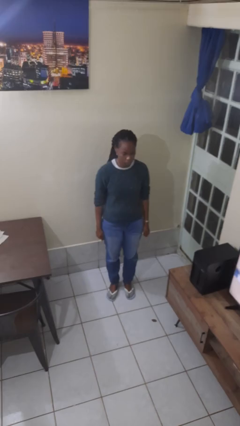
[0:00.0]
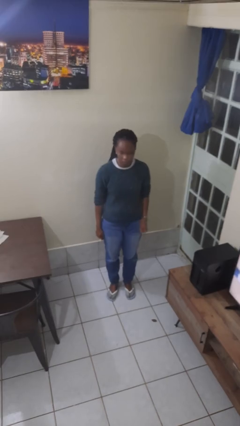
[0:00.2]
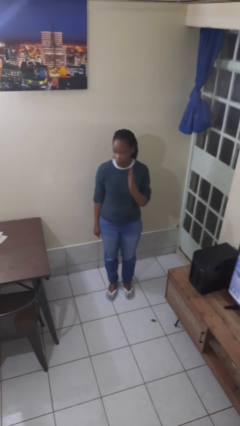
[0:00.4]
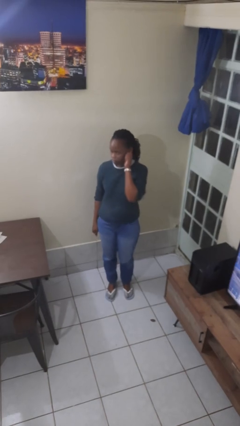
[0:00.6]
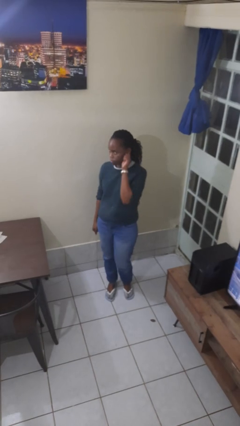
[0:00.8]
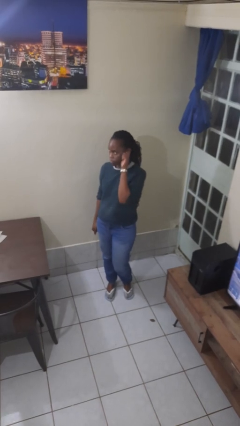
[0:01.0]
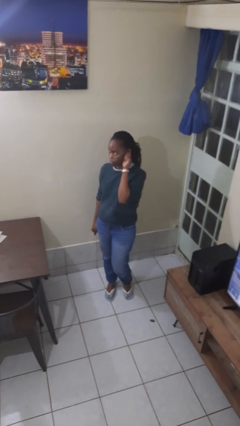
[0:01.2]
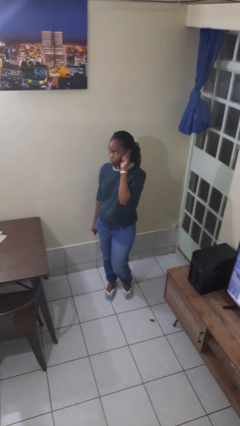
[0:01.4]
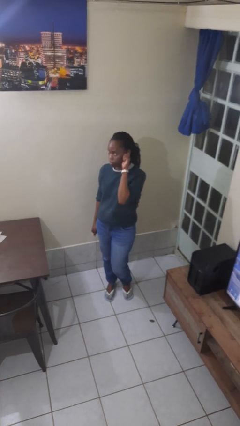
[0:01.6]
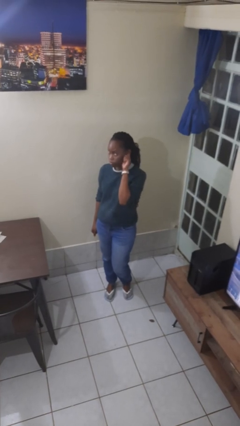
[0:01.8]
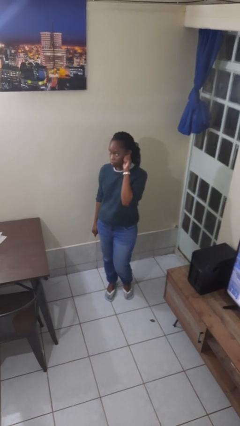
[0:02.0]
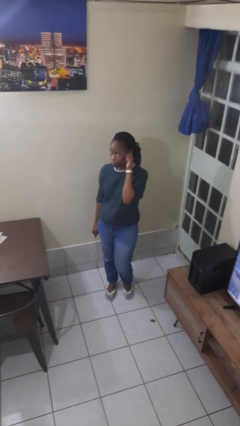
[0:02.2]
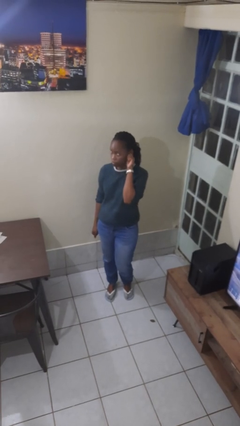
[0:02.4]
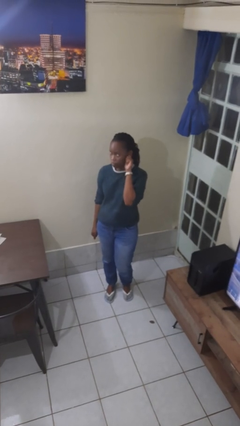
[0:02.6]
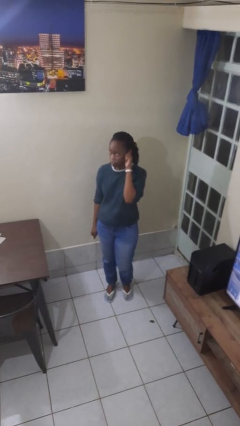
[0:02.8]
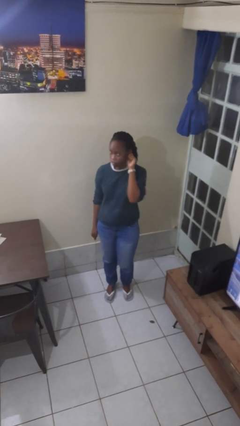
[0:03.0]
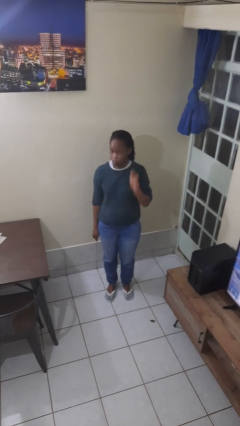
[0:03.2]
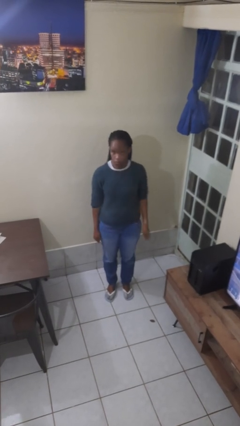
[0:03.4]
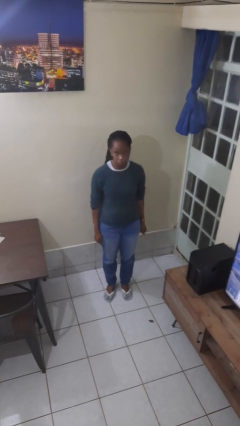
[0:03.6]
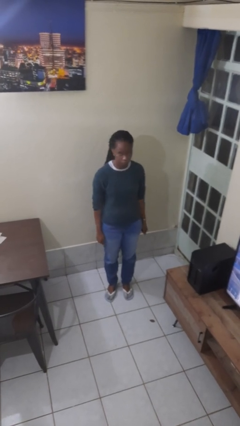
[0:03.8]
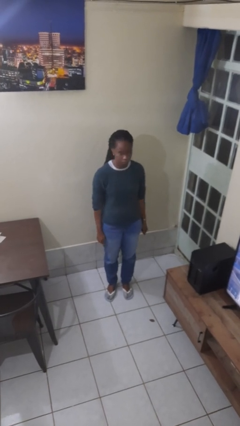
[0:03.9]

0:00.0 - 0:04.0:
person touches earlobe

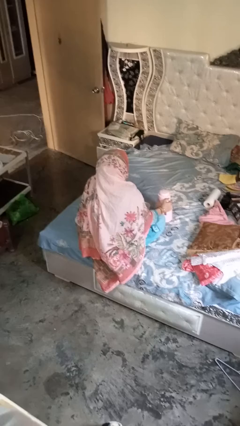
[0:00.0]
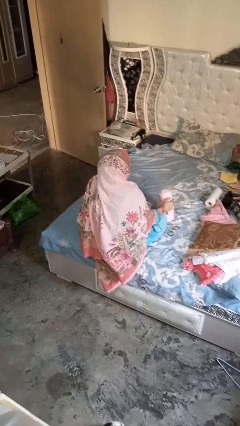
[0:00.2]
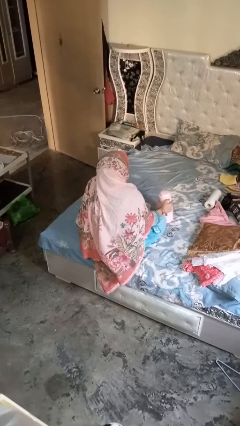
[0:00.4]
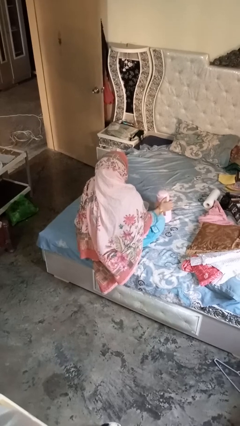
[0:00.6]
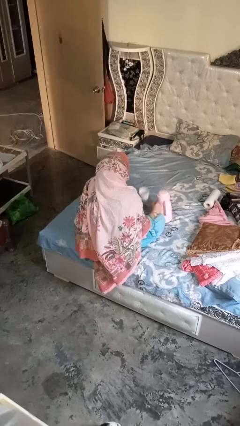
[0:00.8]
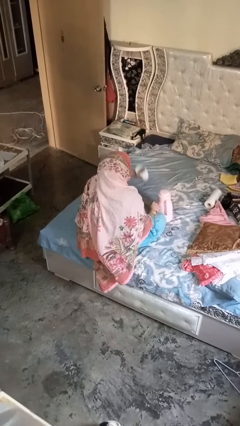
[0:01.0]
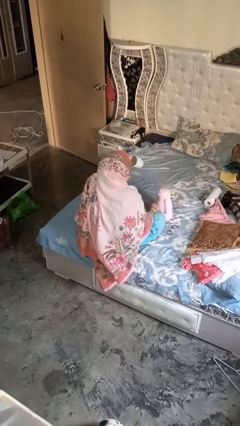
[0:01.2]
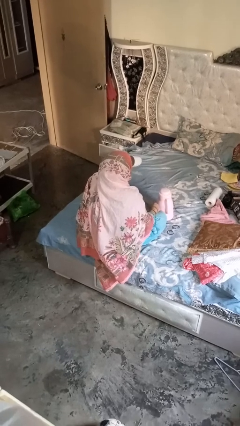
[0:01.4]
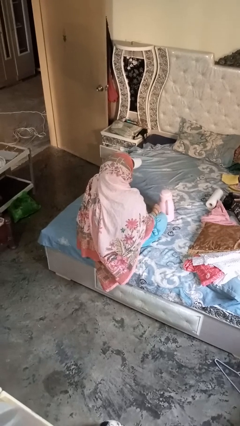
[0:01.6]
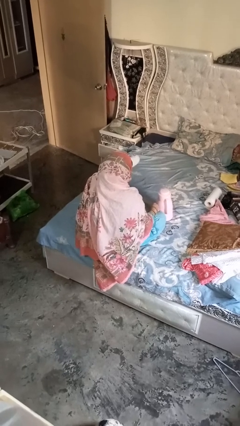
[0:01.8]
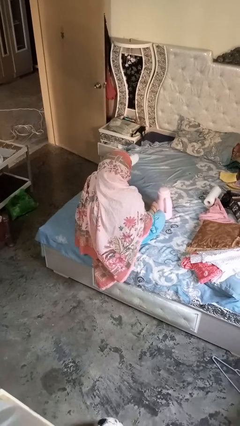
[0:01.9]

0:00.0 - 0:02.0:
person pours coffee into mug

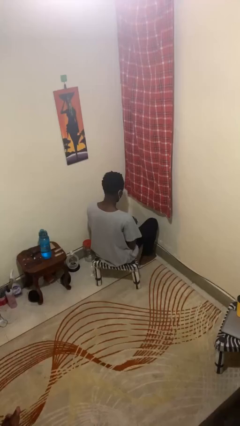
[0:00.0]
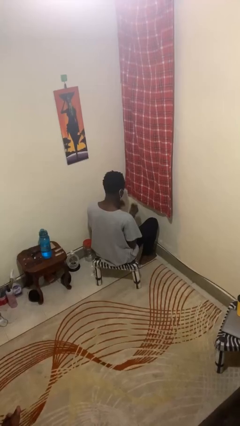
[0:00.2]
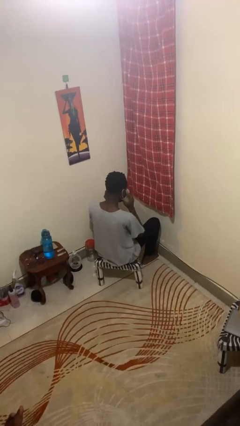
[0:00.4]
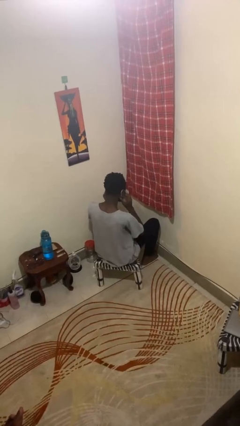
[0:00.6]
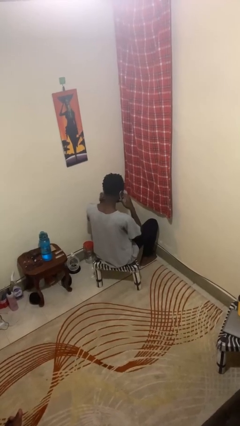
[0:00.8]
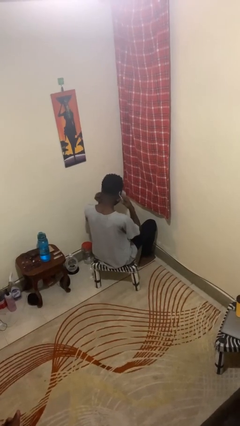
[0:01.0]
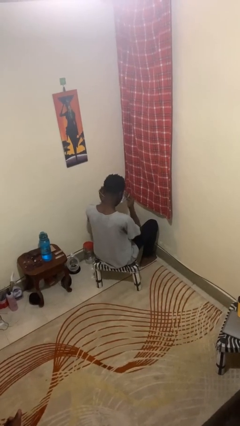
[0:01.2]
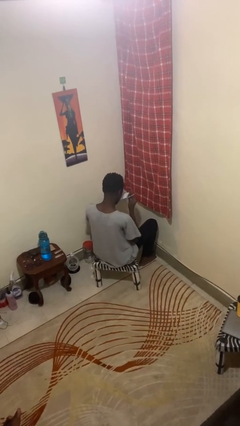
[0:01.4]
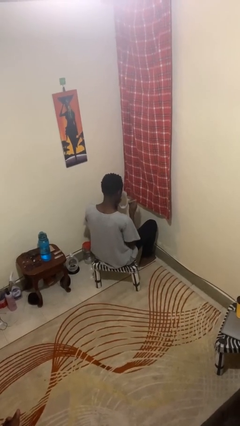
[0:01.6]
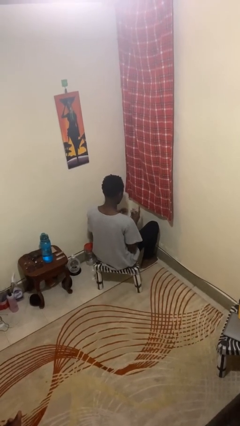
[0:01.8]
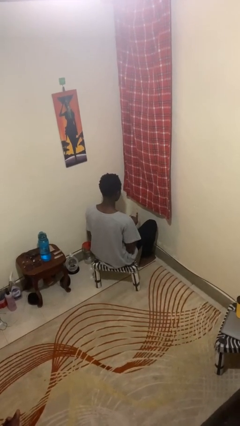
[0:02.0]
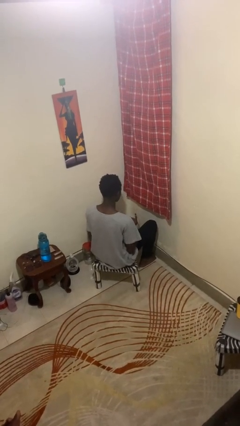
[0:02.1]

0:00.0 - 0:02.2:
person takes off facemask

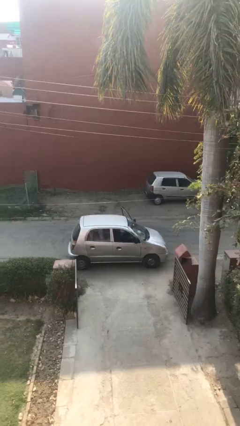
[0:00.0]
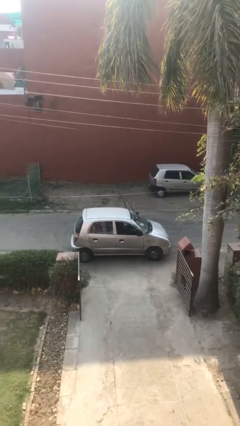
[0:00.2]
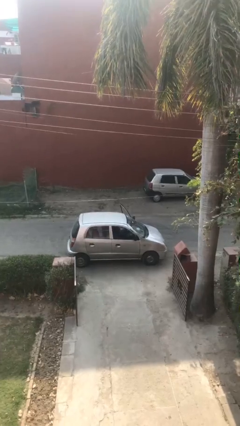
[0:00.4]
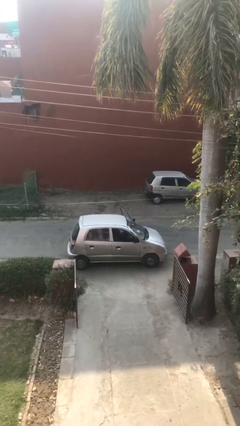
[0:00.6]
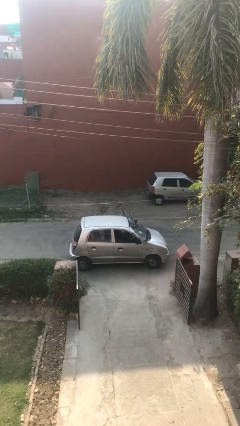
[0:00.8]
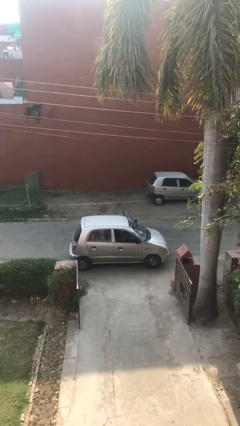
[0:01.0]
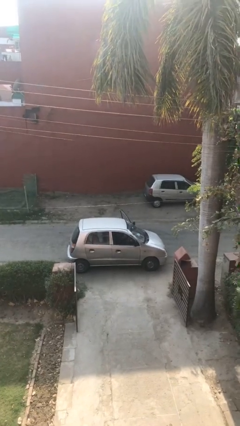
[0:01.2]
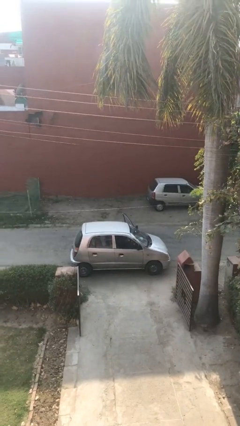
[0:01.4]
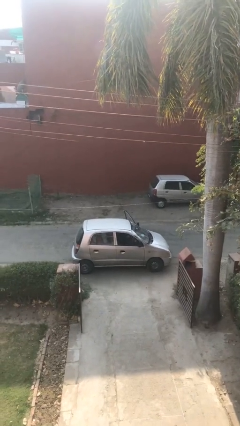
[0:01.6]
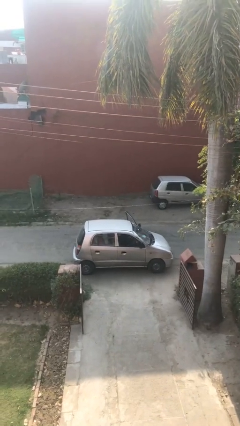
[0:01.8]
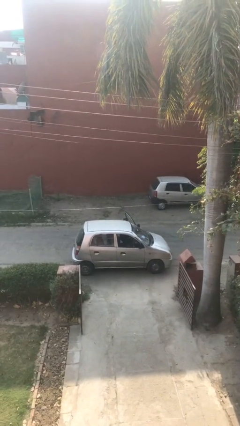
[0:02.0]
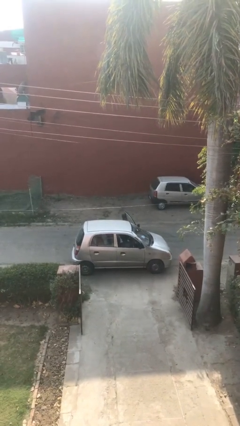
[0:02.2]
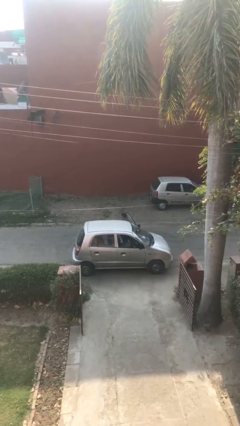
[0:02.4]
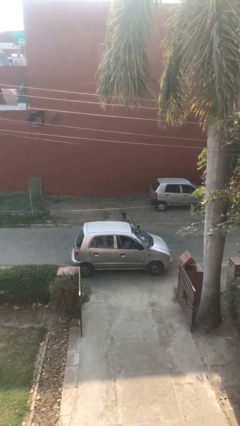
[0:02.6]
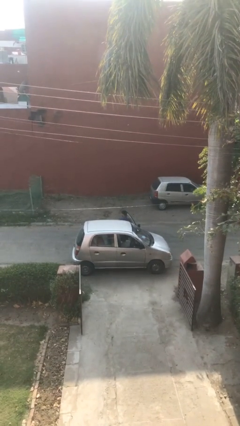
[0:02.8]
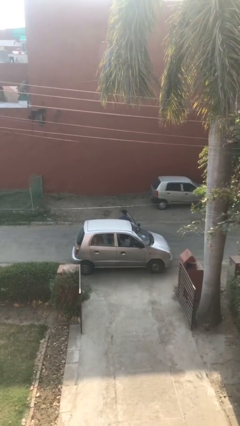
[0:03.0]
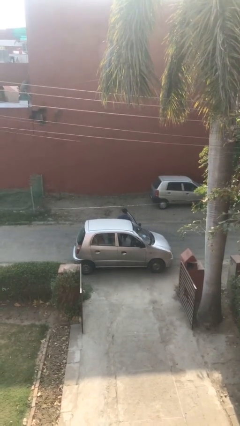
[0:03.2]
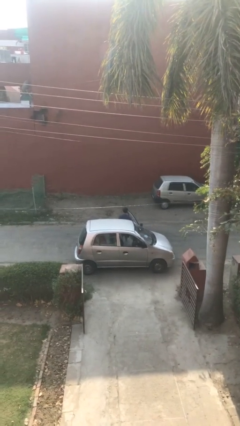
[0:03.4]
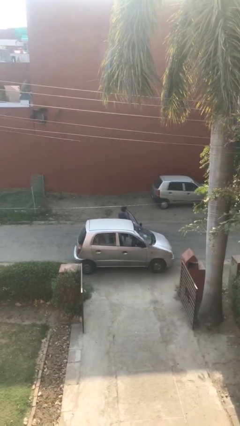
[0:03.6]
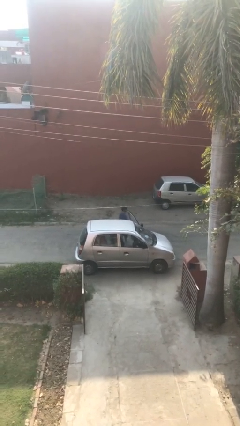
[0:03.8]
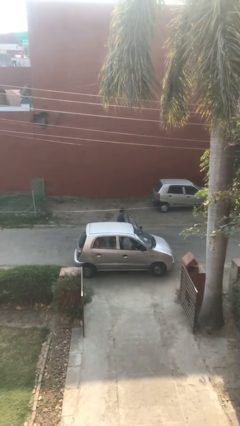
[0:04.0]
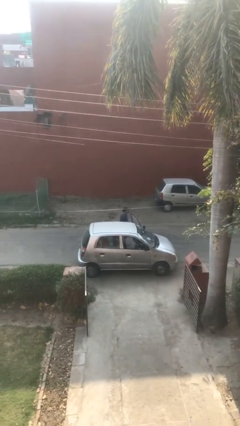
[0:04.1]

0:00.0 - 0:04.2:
person exits car

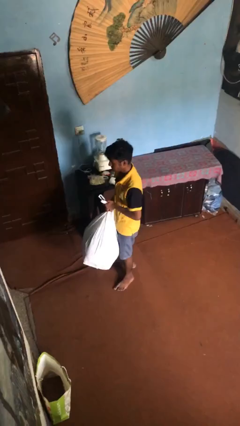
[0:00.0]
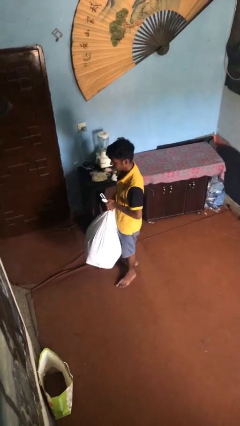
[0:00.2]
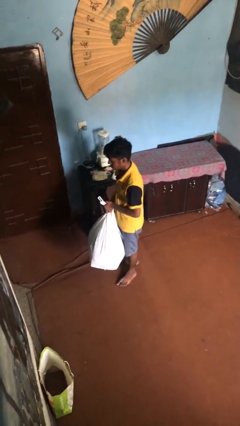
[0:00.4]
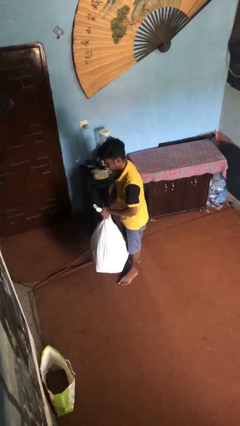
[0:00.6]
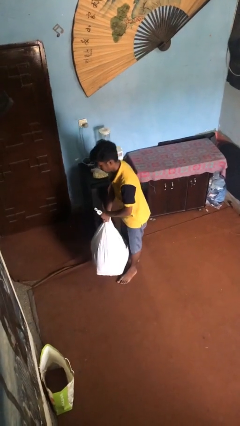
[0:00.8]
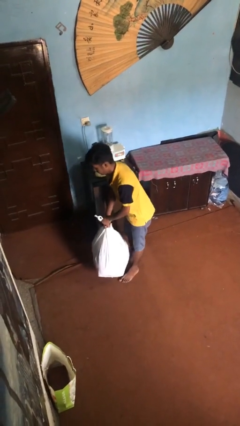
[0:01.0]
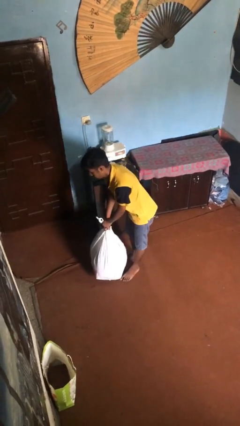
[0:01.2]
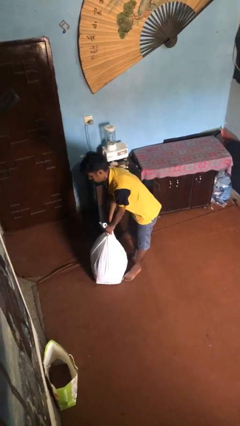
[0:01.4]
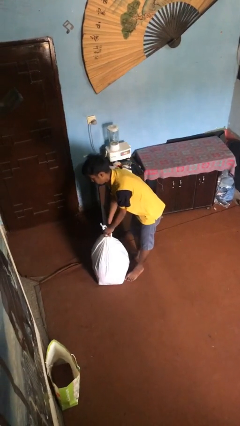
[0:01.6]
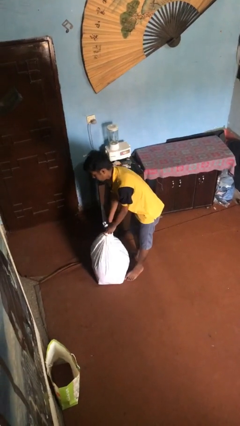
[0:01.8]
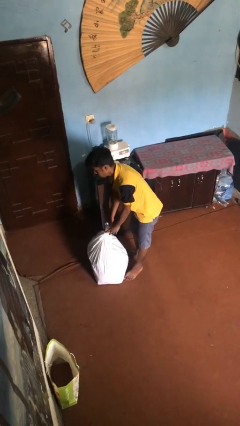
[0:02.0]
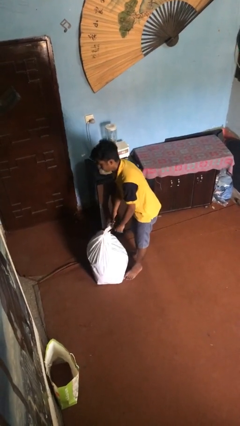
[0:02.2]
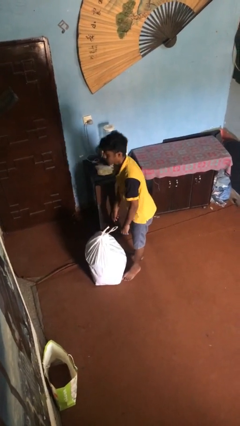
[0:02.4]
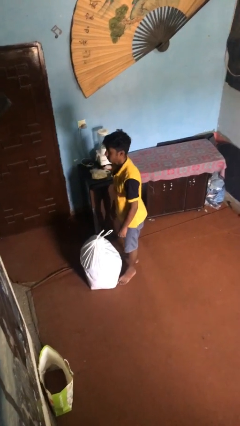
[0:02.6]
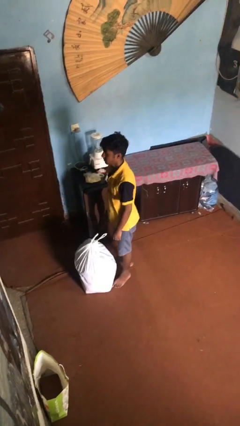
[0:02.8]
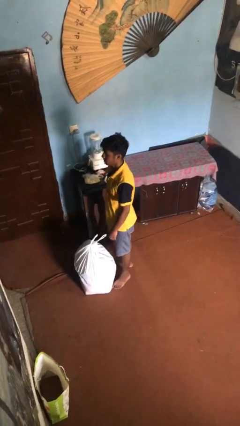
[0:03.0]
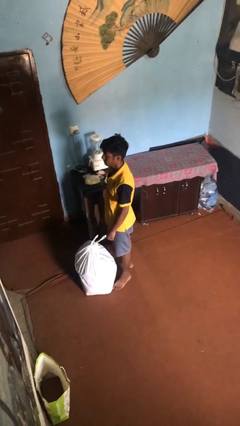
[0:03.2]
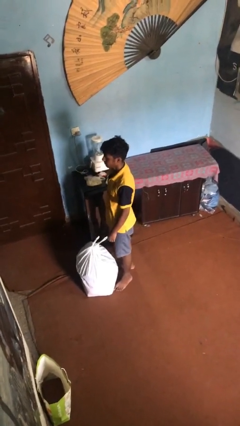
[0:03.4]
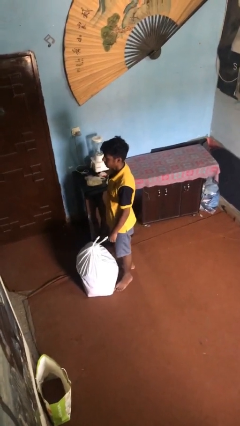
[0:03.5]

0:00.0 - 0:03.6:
person puts down object on floor

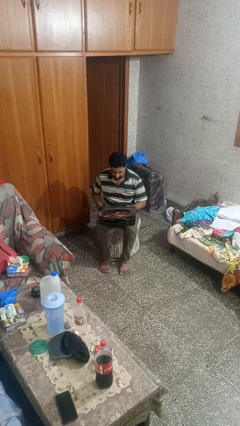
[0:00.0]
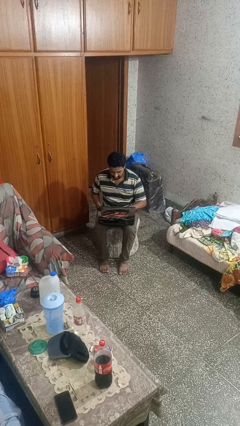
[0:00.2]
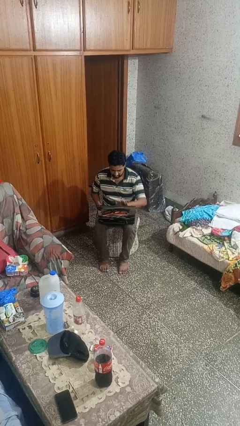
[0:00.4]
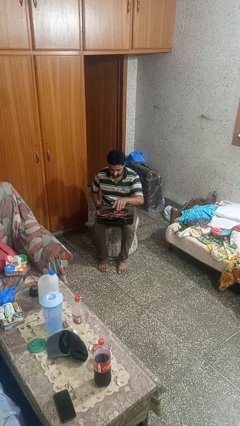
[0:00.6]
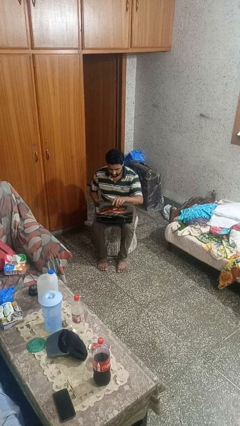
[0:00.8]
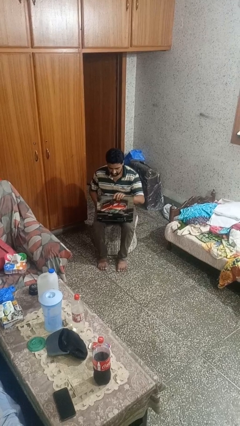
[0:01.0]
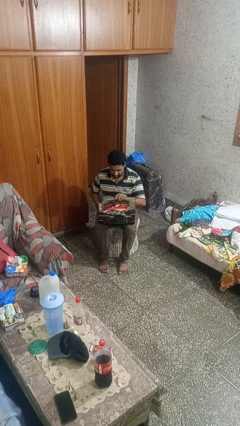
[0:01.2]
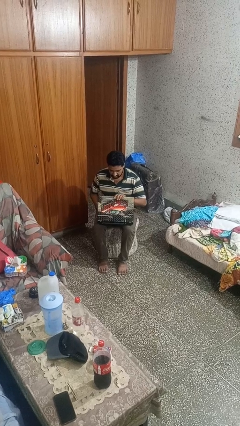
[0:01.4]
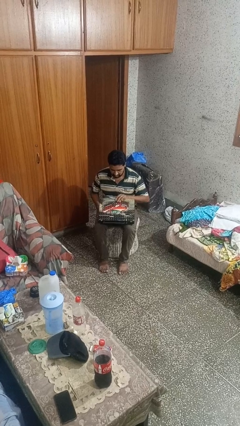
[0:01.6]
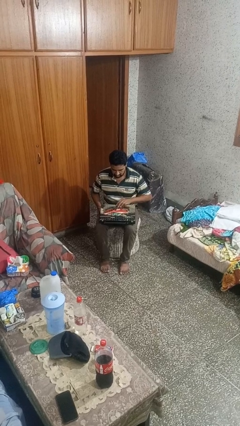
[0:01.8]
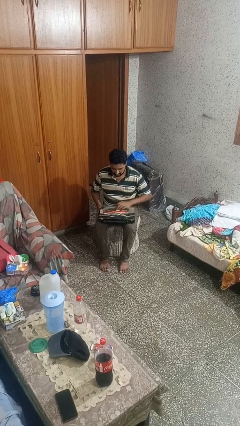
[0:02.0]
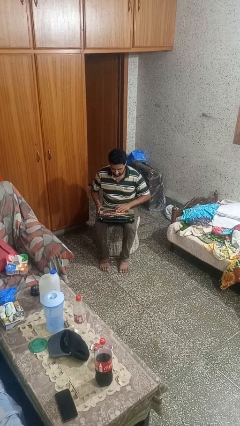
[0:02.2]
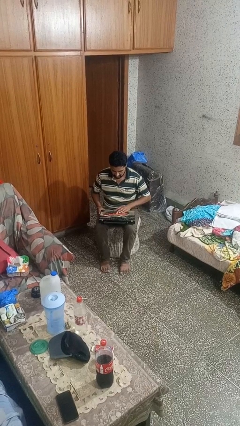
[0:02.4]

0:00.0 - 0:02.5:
person closes laptop
